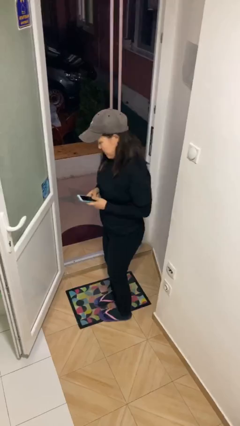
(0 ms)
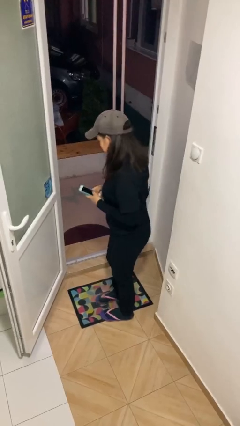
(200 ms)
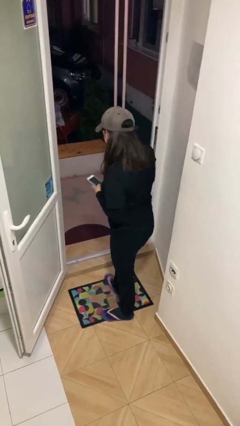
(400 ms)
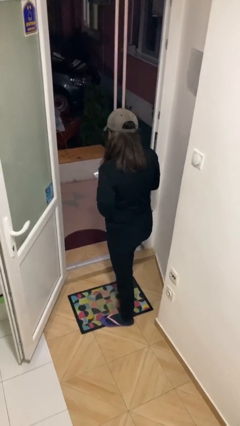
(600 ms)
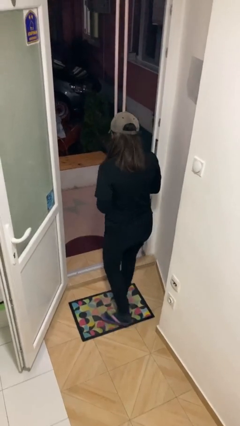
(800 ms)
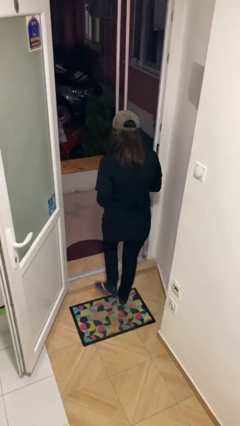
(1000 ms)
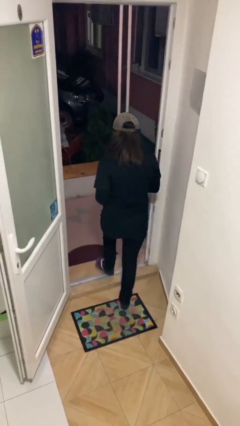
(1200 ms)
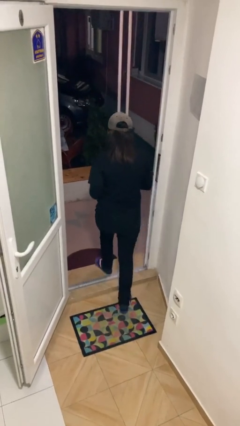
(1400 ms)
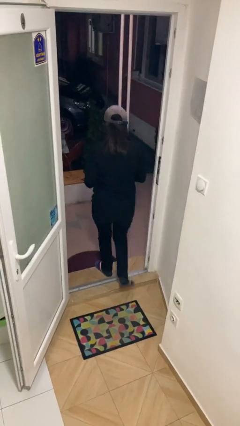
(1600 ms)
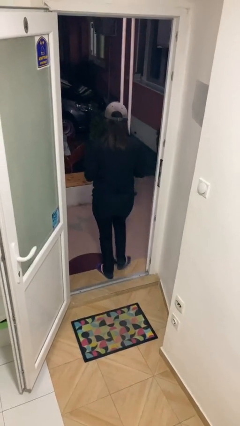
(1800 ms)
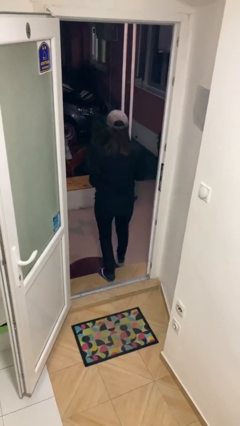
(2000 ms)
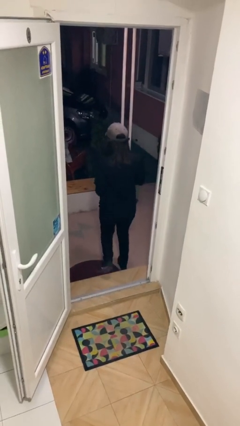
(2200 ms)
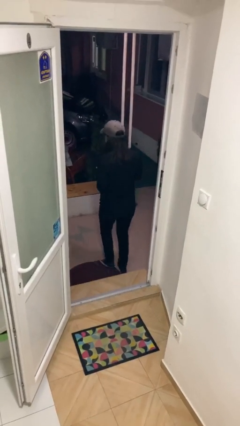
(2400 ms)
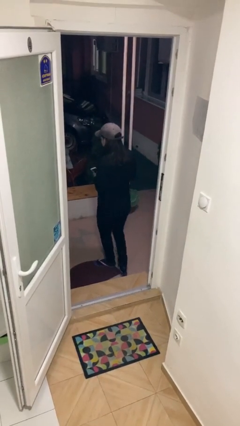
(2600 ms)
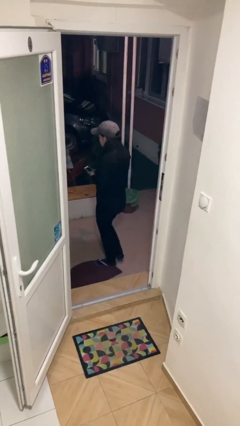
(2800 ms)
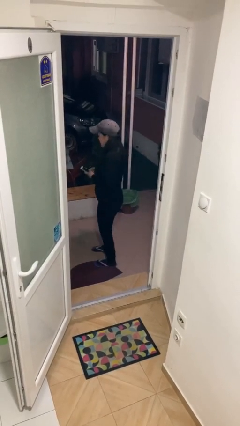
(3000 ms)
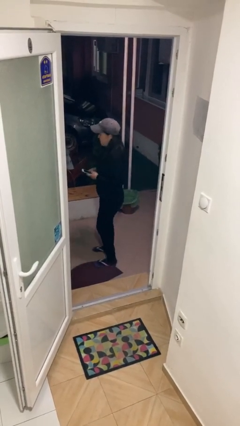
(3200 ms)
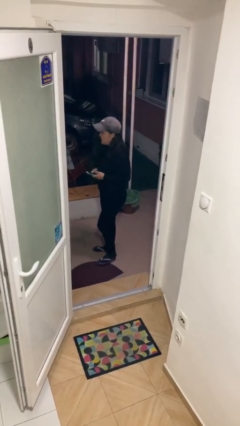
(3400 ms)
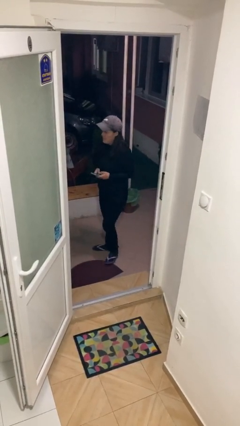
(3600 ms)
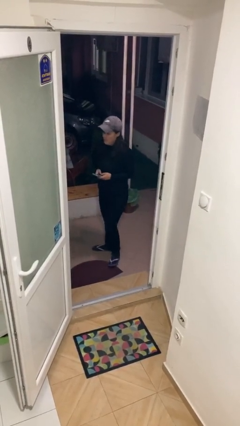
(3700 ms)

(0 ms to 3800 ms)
person exits scene through structure

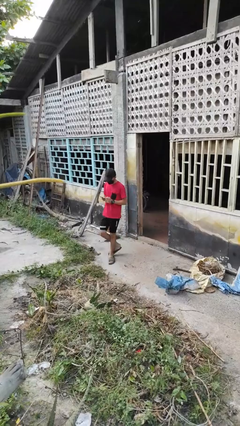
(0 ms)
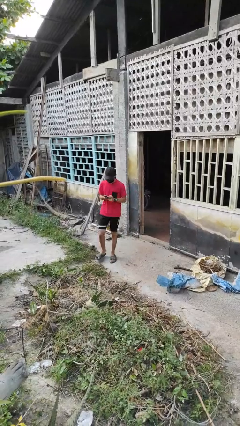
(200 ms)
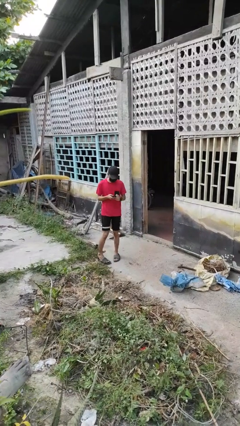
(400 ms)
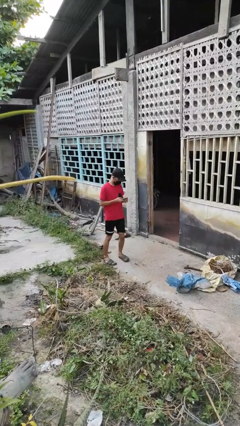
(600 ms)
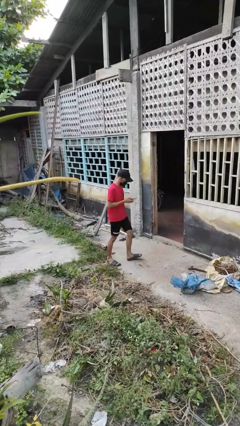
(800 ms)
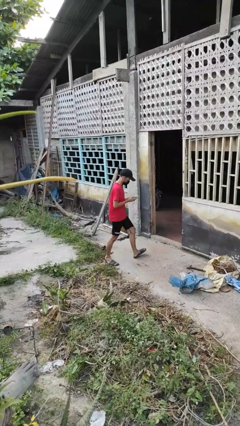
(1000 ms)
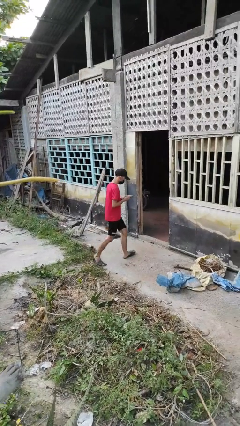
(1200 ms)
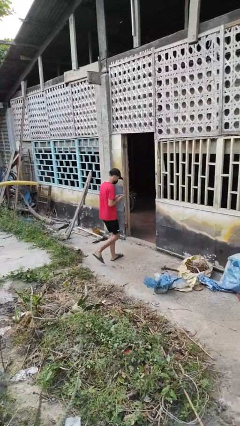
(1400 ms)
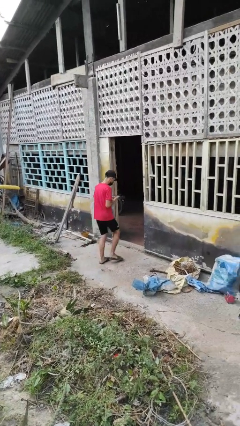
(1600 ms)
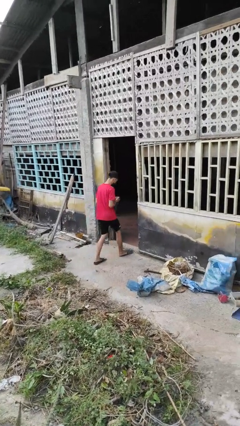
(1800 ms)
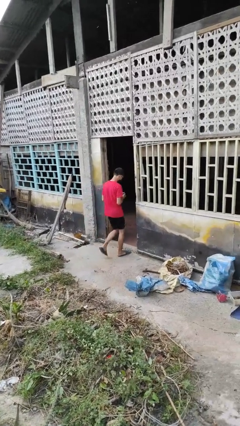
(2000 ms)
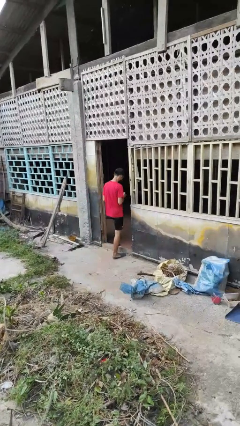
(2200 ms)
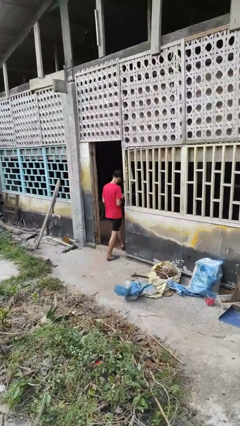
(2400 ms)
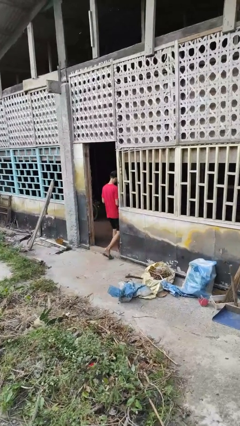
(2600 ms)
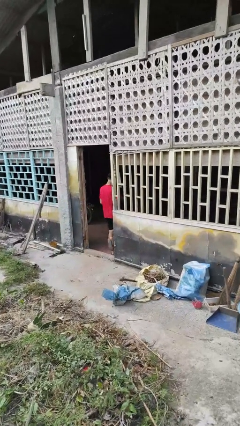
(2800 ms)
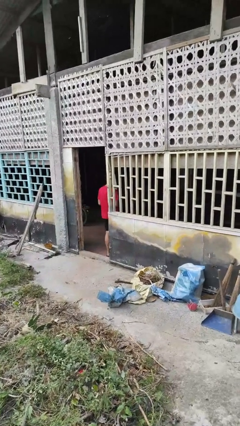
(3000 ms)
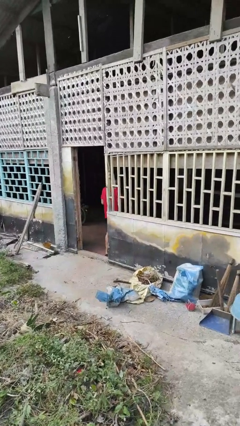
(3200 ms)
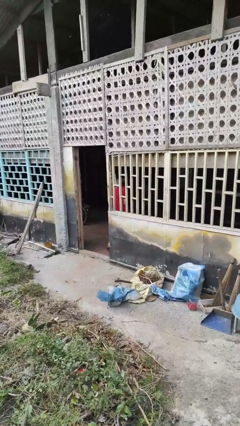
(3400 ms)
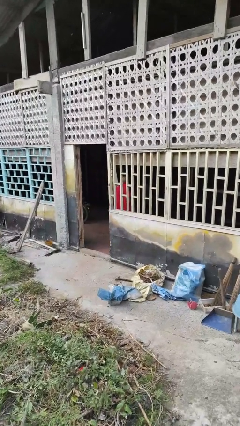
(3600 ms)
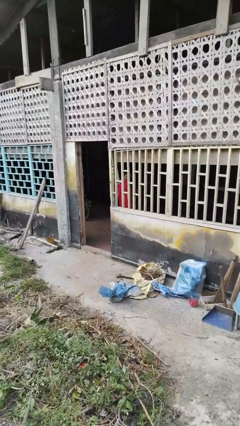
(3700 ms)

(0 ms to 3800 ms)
person enters scene through structure

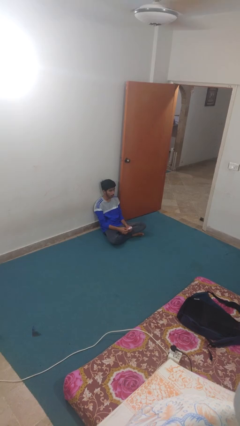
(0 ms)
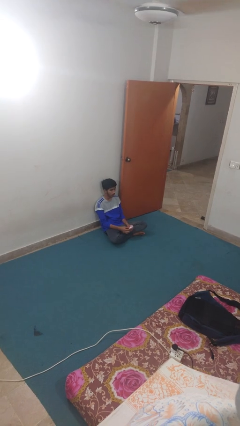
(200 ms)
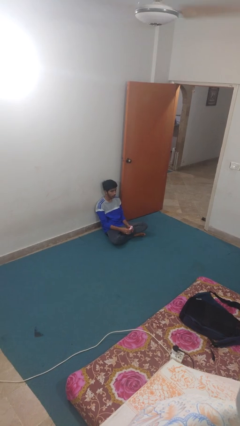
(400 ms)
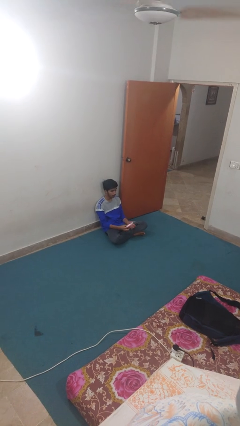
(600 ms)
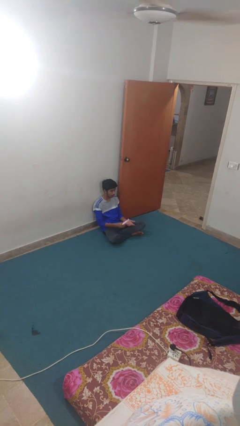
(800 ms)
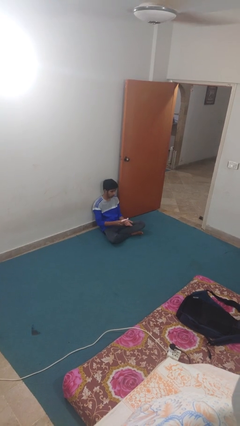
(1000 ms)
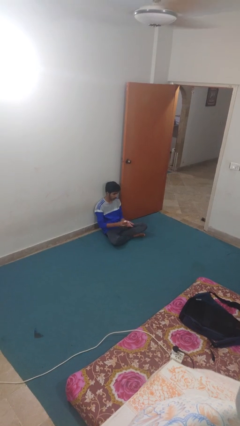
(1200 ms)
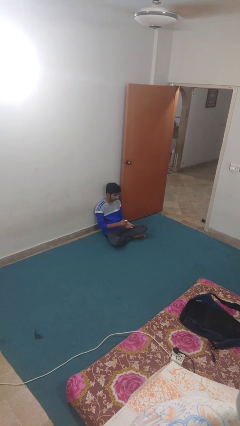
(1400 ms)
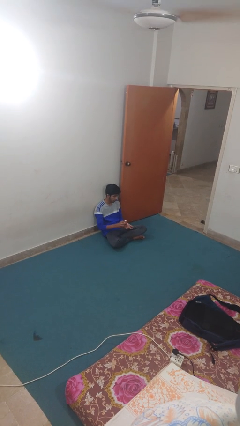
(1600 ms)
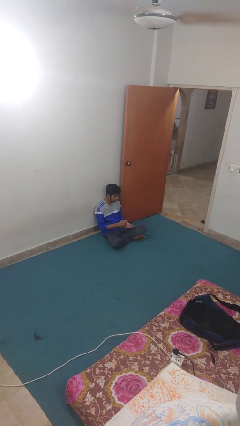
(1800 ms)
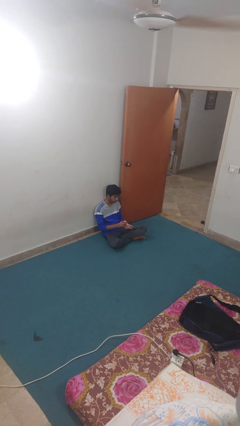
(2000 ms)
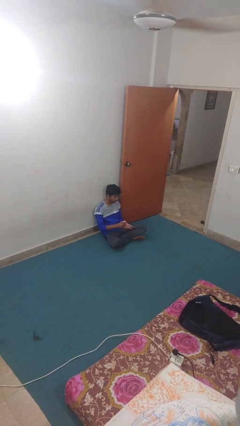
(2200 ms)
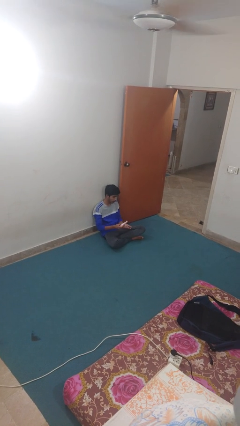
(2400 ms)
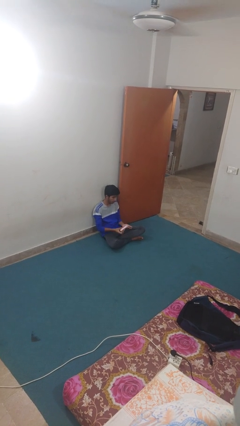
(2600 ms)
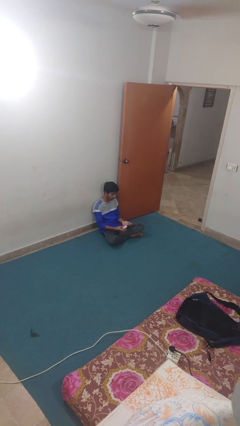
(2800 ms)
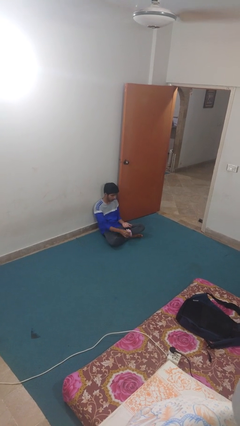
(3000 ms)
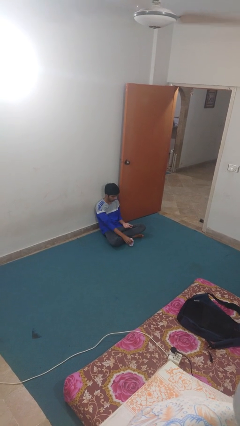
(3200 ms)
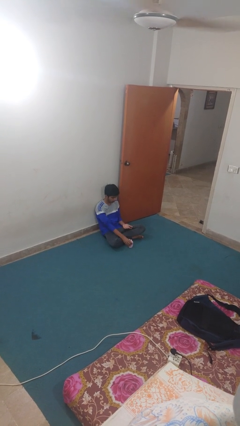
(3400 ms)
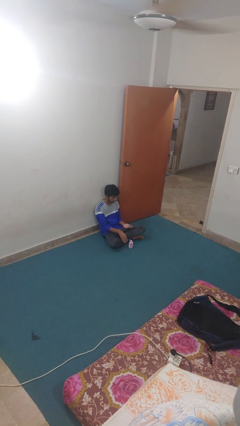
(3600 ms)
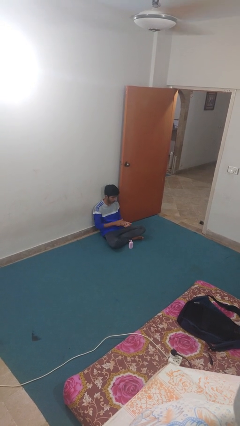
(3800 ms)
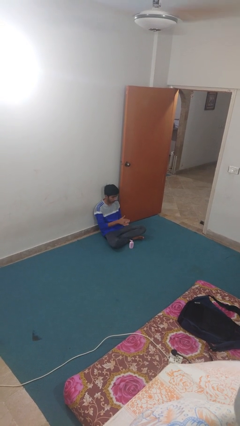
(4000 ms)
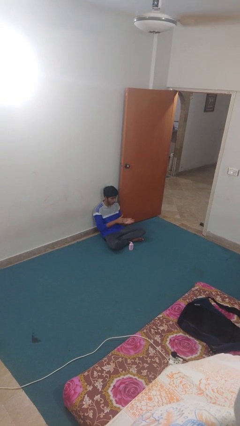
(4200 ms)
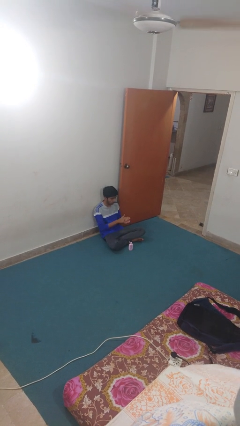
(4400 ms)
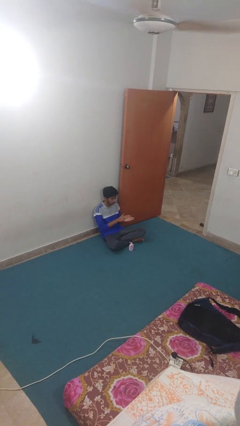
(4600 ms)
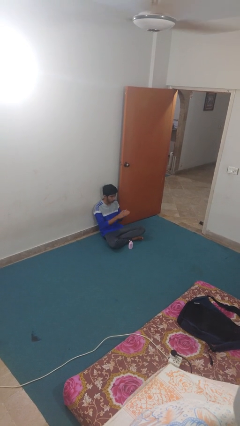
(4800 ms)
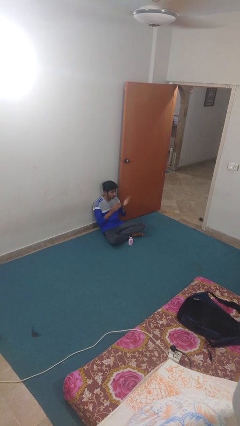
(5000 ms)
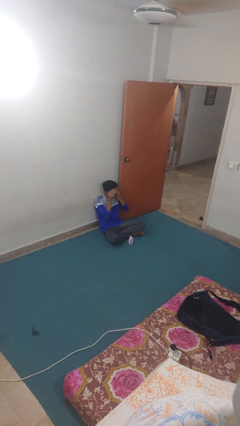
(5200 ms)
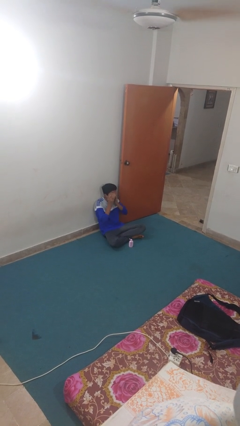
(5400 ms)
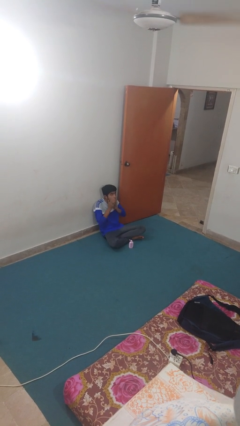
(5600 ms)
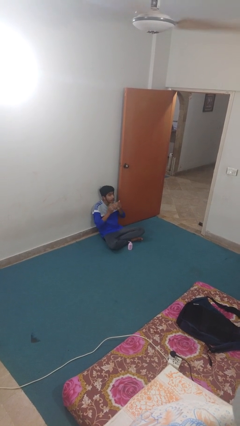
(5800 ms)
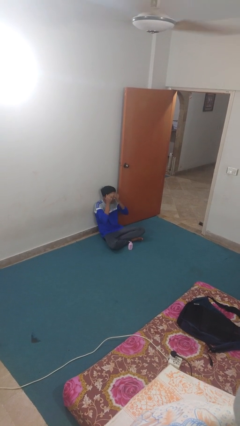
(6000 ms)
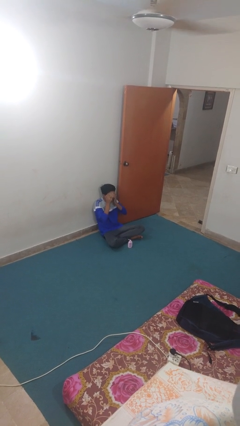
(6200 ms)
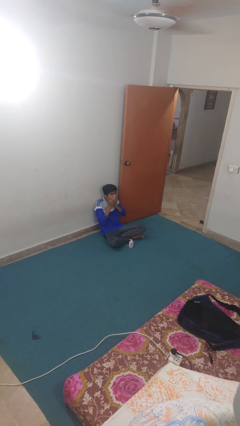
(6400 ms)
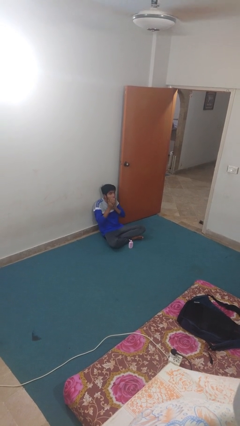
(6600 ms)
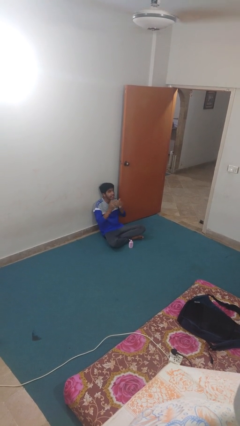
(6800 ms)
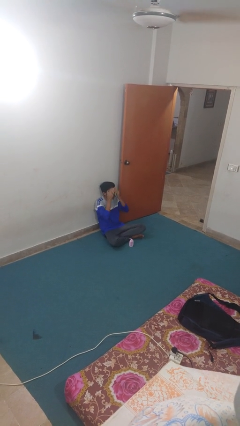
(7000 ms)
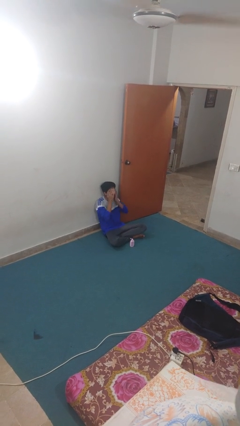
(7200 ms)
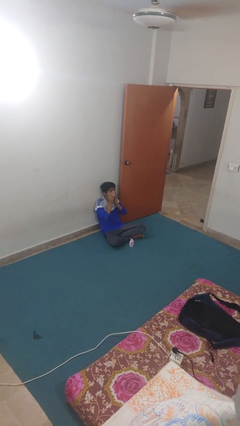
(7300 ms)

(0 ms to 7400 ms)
person applies facial moisturizer

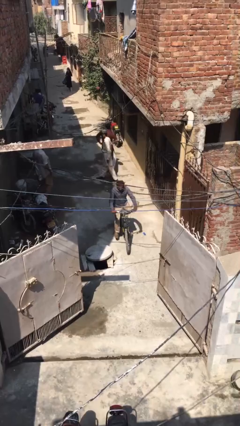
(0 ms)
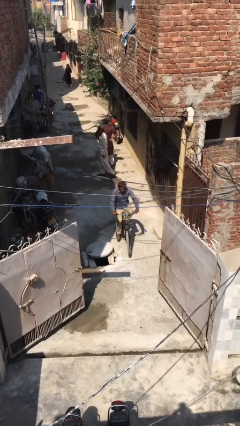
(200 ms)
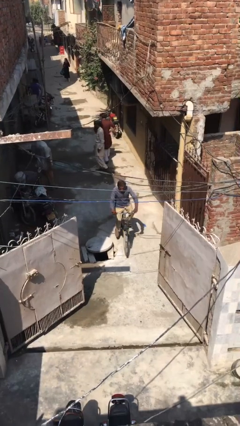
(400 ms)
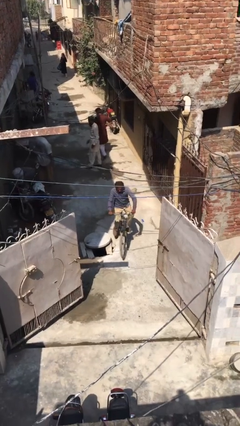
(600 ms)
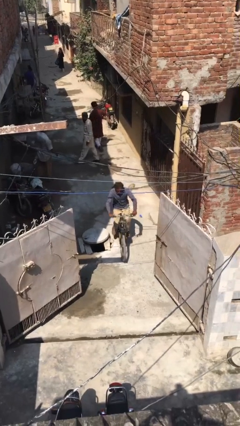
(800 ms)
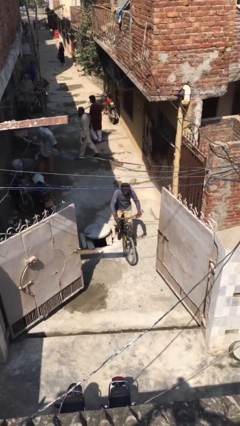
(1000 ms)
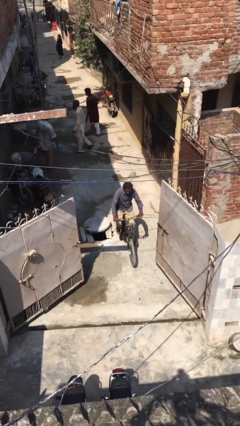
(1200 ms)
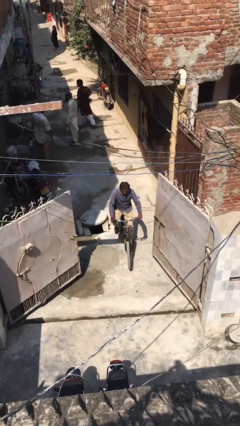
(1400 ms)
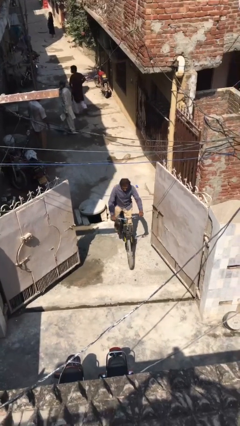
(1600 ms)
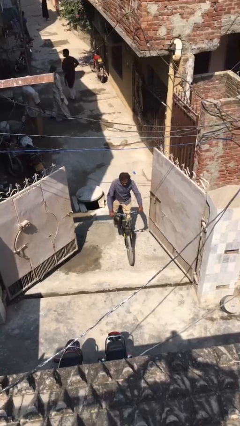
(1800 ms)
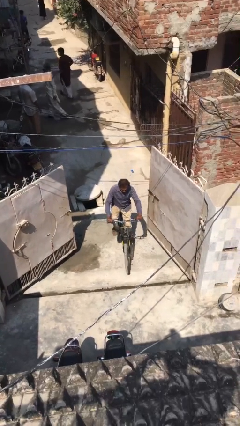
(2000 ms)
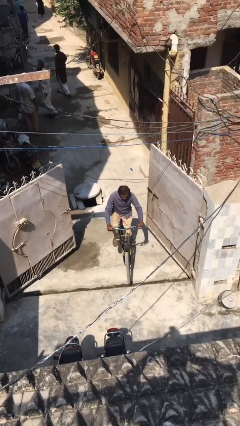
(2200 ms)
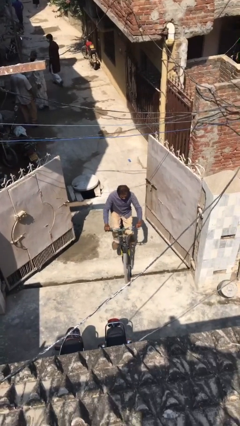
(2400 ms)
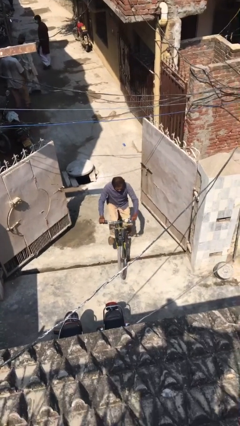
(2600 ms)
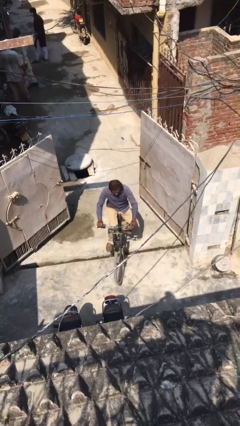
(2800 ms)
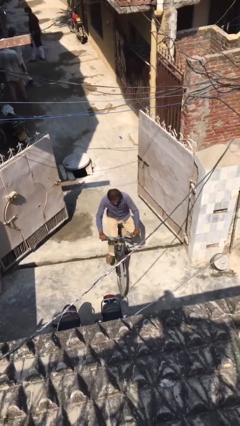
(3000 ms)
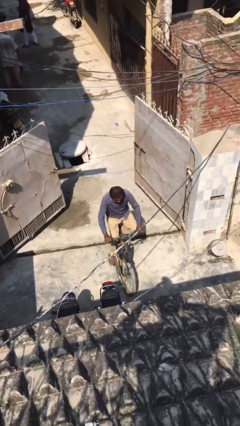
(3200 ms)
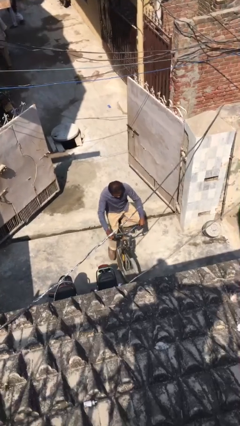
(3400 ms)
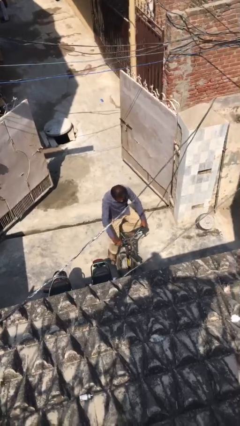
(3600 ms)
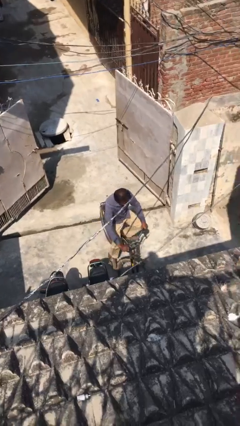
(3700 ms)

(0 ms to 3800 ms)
person rides bicycle
